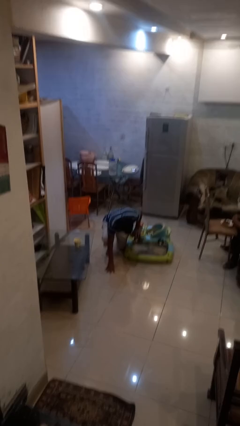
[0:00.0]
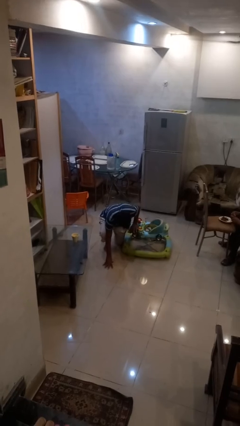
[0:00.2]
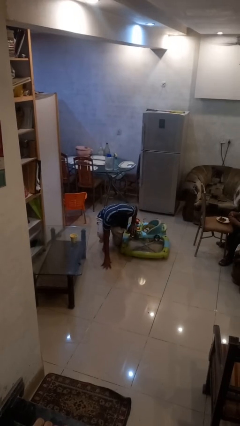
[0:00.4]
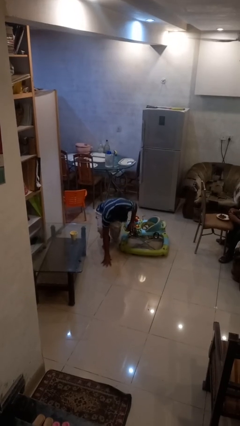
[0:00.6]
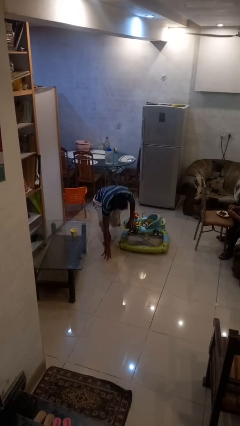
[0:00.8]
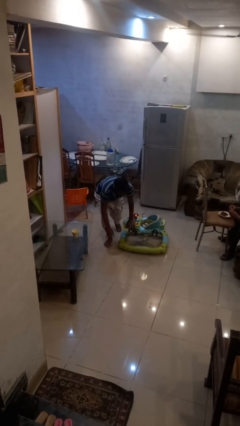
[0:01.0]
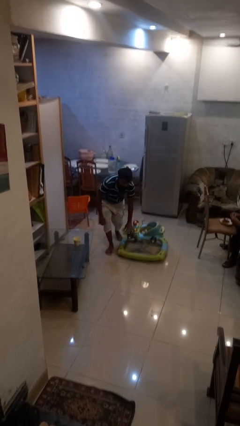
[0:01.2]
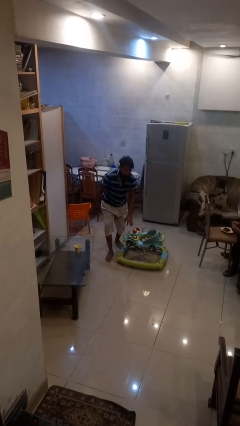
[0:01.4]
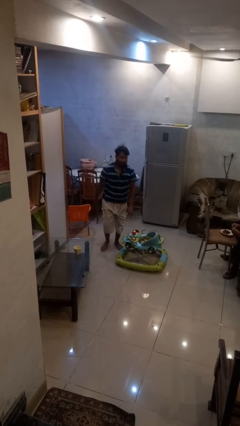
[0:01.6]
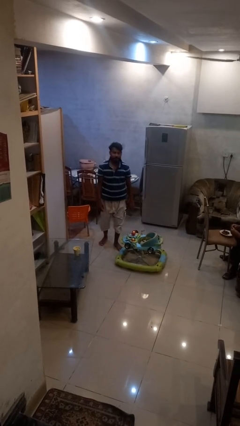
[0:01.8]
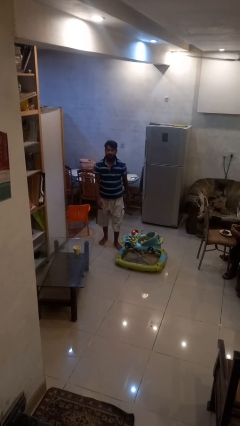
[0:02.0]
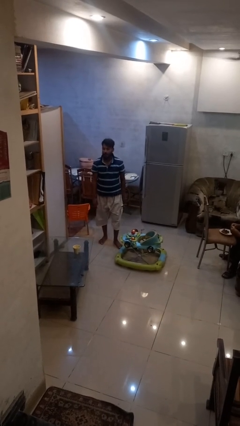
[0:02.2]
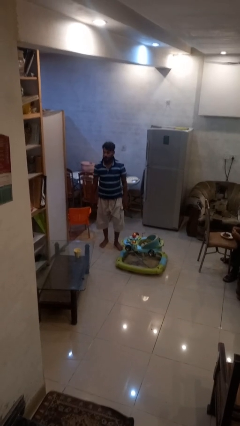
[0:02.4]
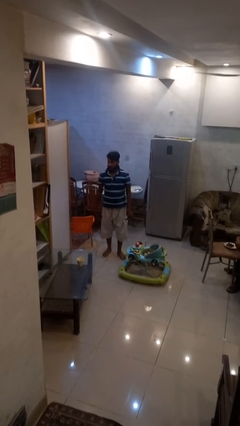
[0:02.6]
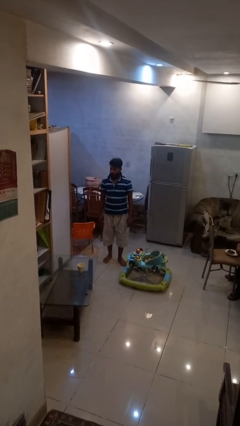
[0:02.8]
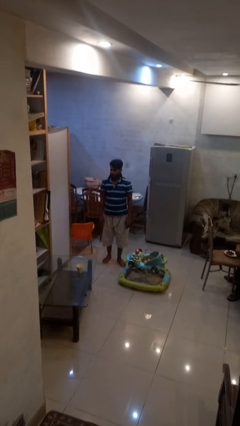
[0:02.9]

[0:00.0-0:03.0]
person stands up from floor

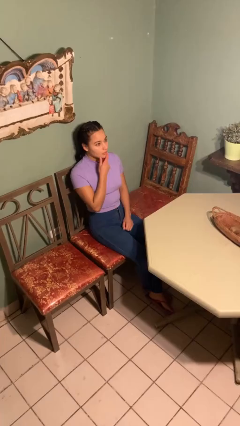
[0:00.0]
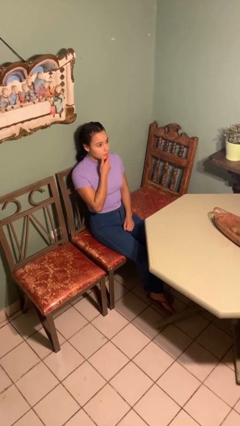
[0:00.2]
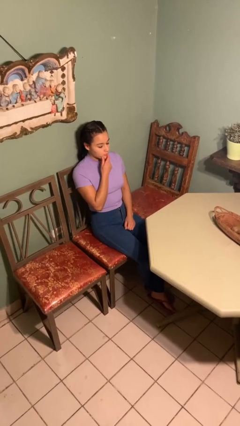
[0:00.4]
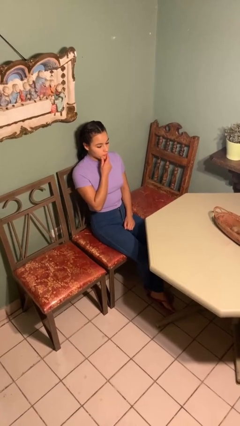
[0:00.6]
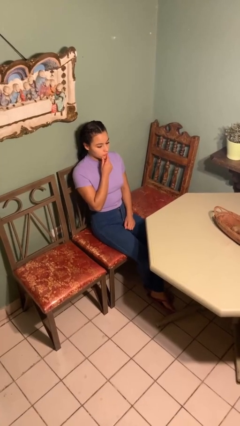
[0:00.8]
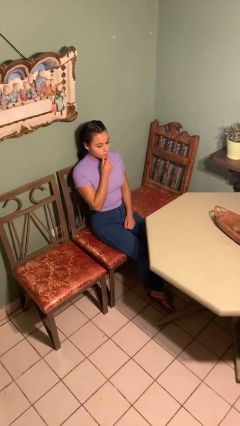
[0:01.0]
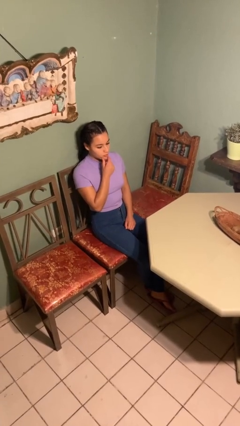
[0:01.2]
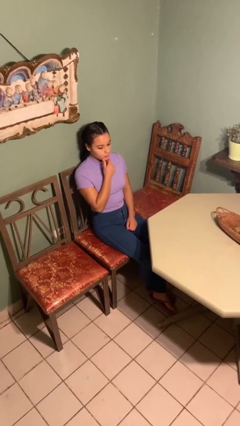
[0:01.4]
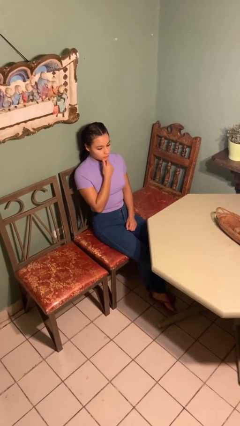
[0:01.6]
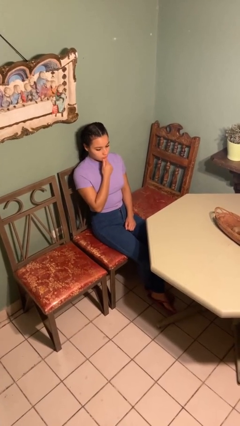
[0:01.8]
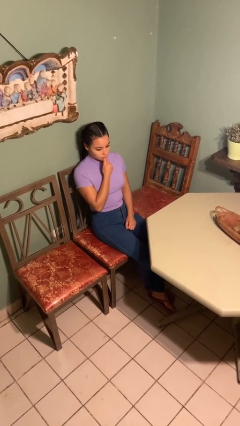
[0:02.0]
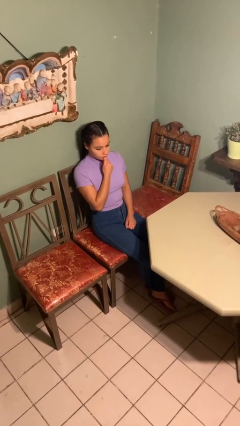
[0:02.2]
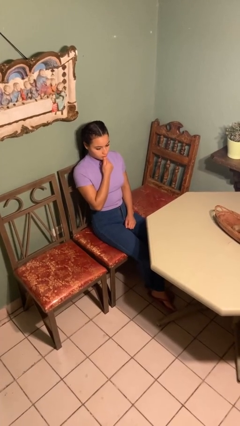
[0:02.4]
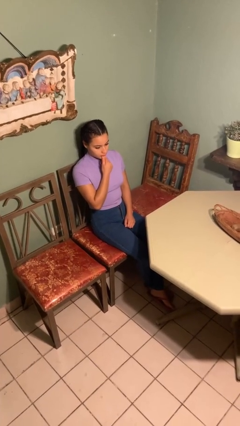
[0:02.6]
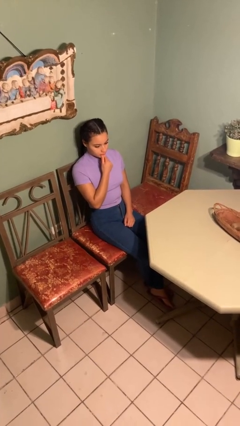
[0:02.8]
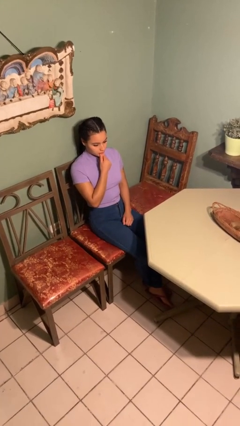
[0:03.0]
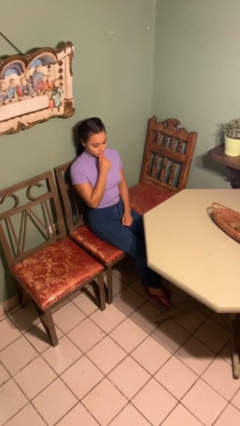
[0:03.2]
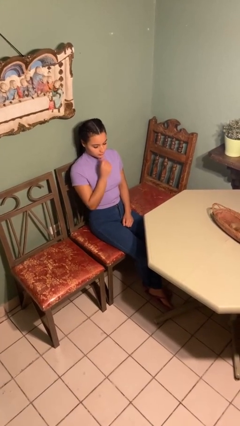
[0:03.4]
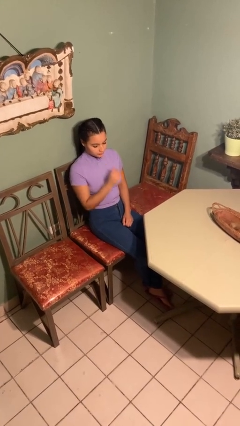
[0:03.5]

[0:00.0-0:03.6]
person strokes chin

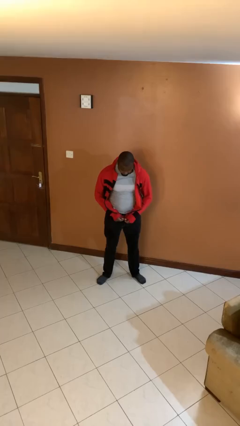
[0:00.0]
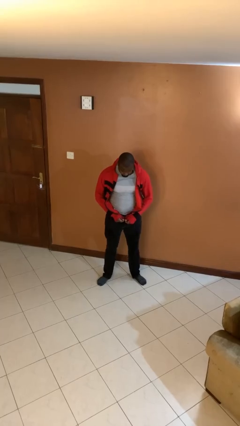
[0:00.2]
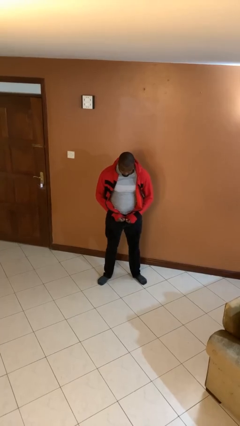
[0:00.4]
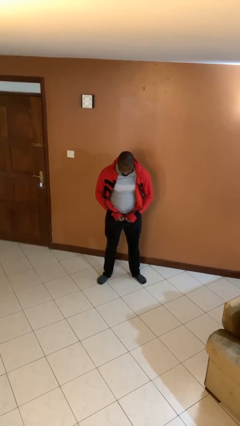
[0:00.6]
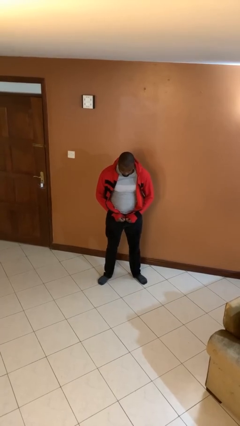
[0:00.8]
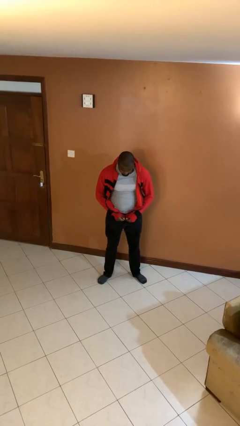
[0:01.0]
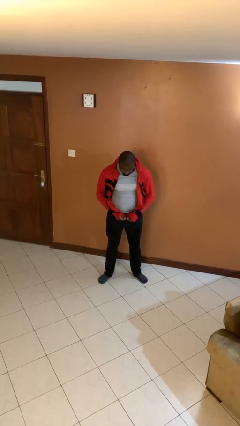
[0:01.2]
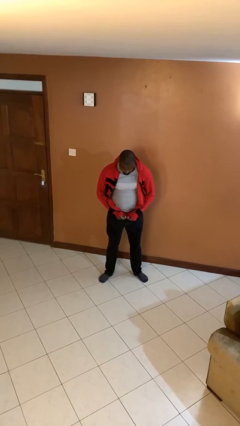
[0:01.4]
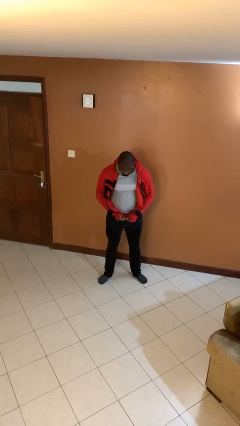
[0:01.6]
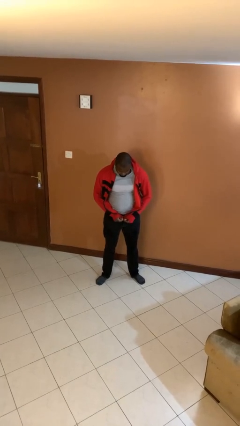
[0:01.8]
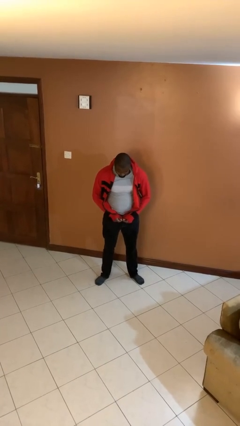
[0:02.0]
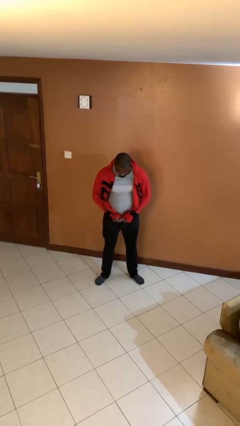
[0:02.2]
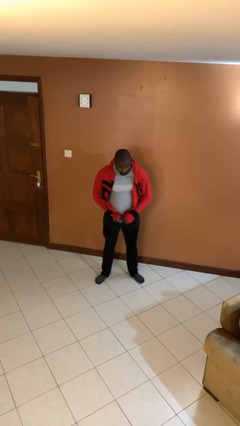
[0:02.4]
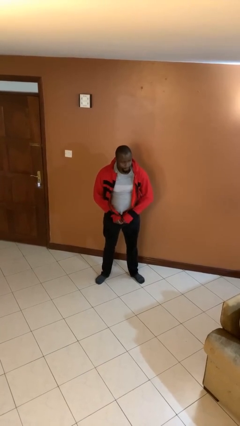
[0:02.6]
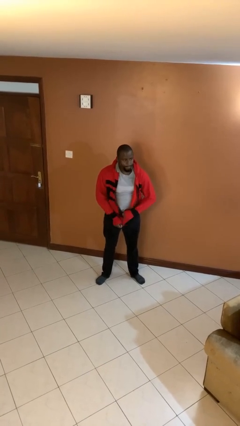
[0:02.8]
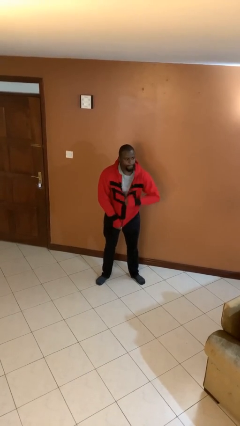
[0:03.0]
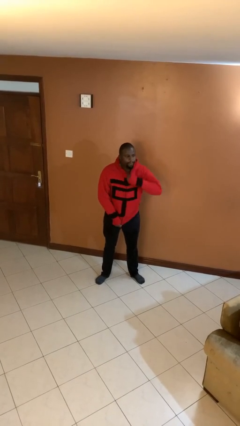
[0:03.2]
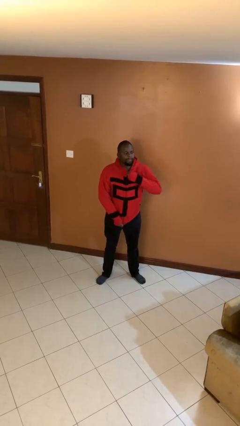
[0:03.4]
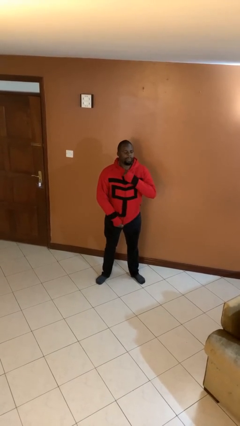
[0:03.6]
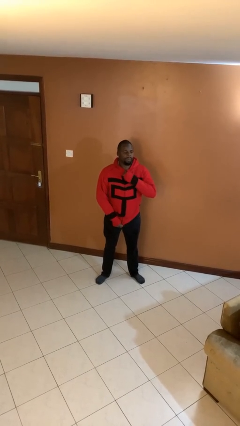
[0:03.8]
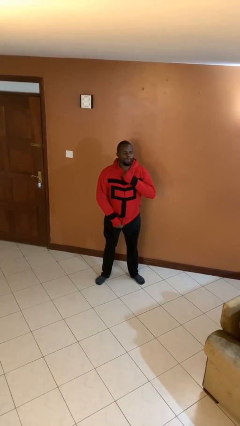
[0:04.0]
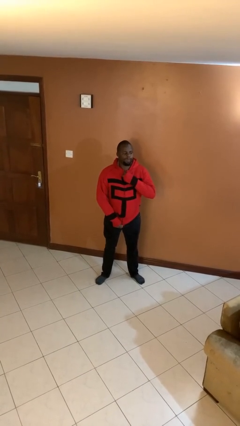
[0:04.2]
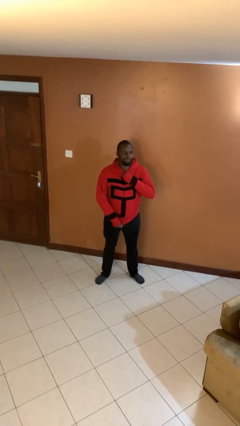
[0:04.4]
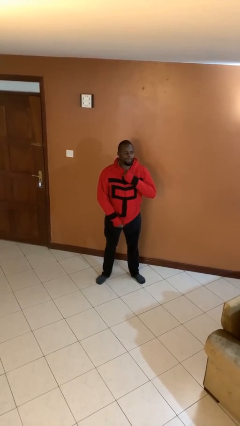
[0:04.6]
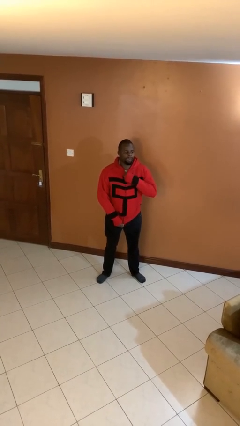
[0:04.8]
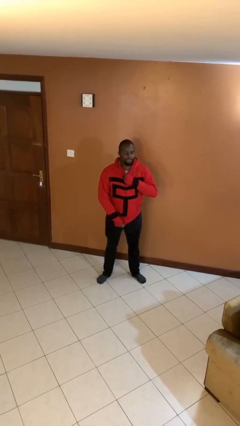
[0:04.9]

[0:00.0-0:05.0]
person zips up jacket

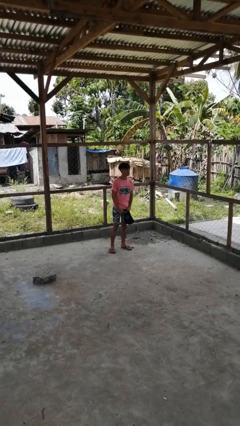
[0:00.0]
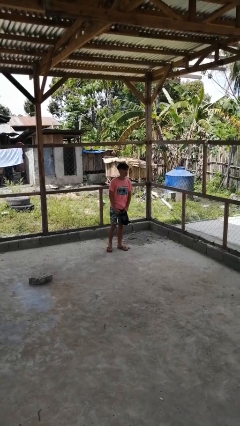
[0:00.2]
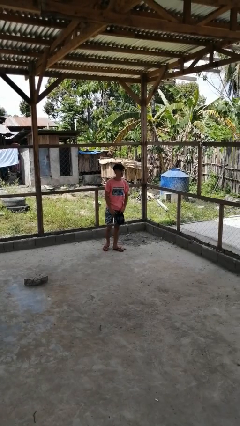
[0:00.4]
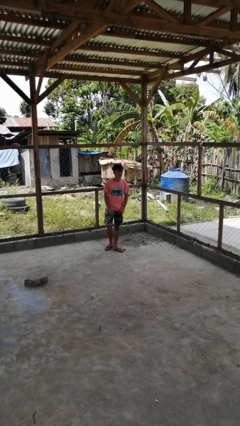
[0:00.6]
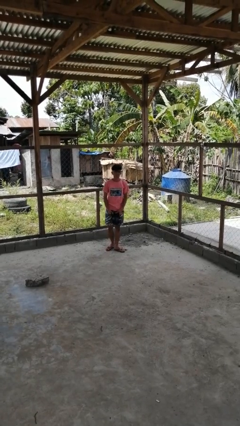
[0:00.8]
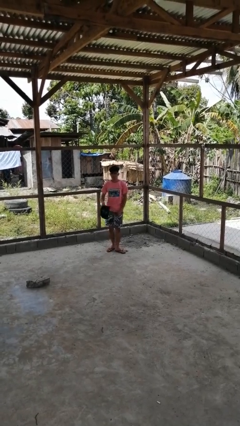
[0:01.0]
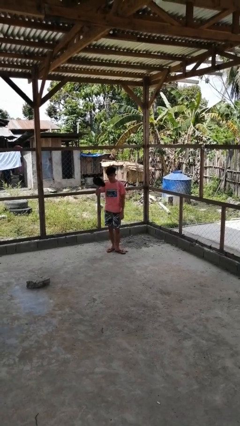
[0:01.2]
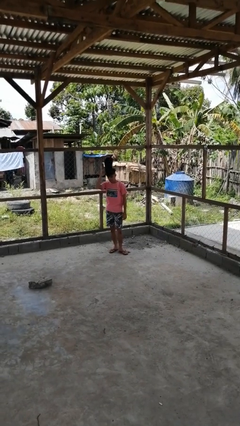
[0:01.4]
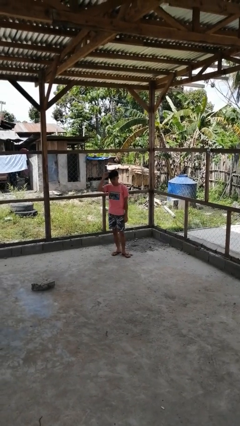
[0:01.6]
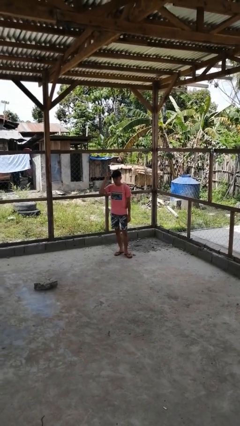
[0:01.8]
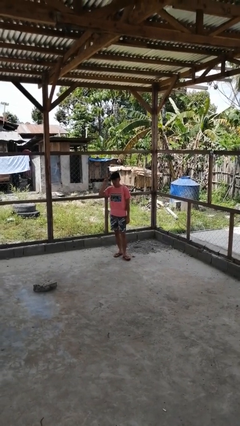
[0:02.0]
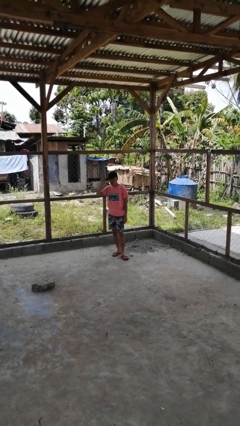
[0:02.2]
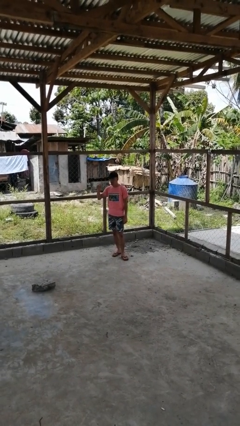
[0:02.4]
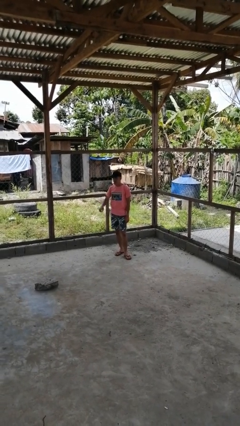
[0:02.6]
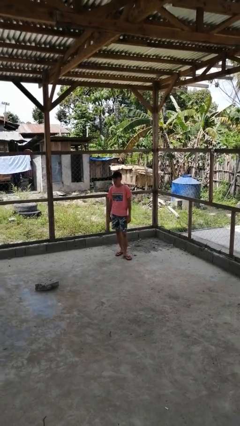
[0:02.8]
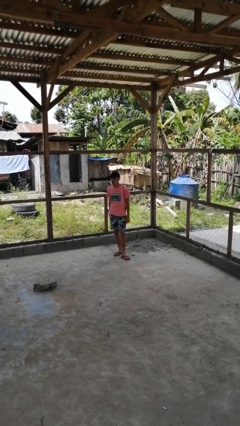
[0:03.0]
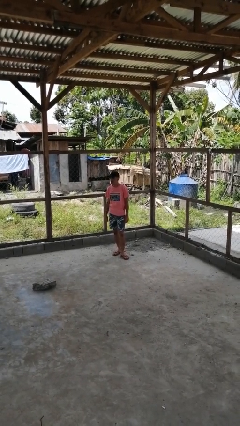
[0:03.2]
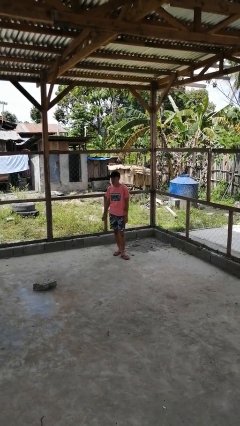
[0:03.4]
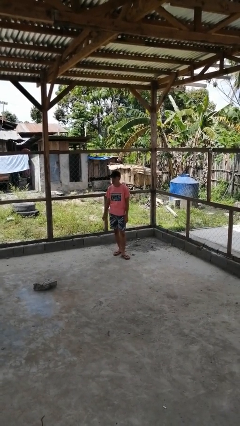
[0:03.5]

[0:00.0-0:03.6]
person puts on hat

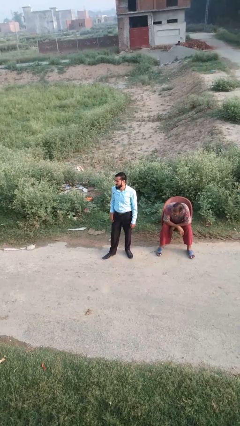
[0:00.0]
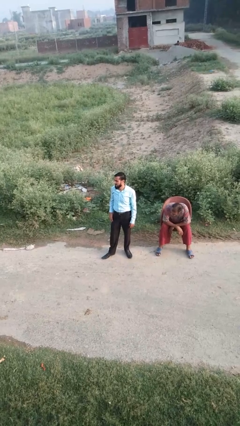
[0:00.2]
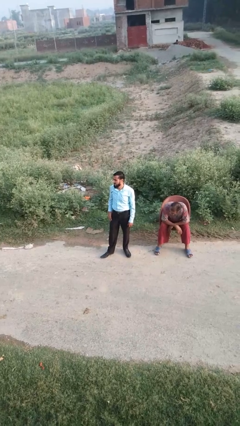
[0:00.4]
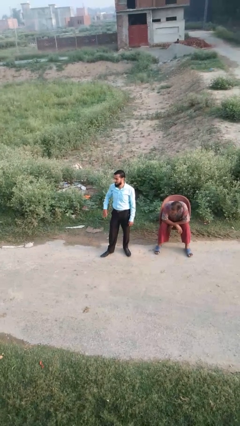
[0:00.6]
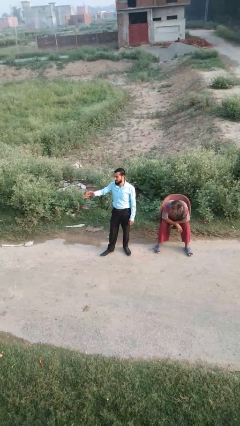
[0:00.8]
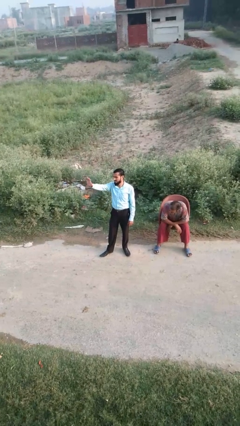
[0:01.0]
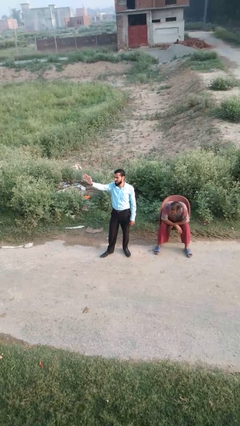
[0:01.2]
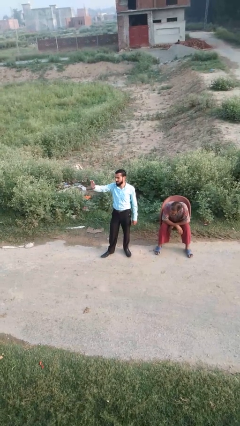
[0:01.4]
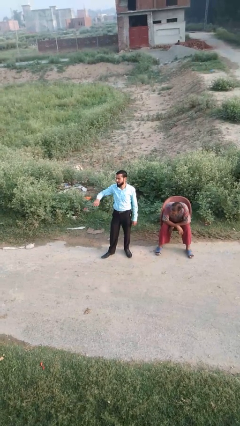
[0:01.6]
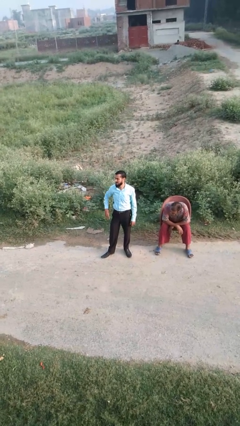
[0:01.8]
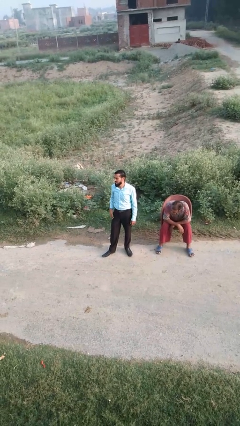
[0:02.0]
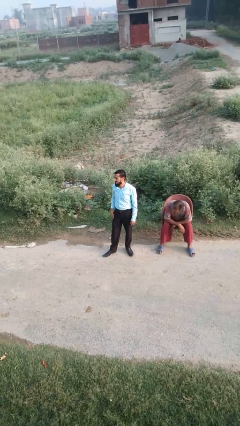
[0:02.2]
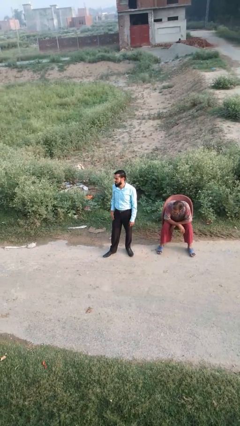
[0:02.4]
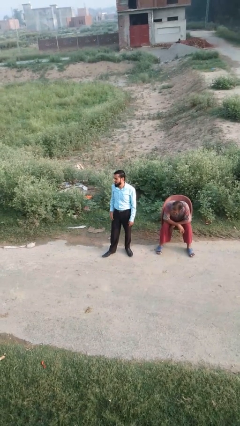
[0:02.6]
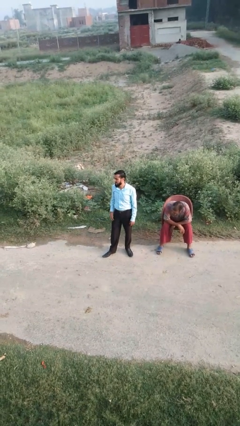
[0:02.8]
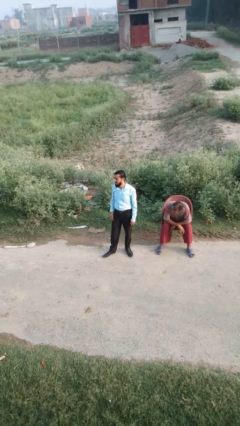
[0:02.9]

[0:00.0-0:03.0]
person waves at person
